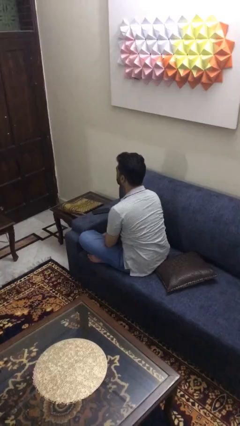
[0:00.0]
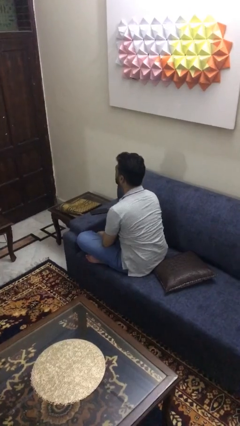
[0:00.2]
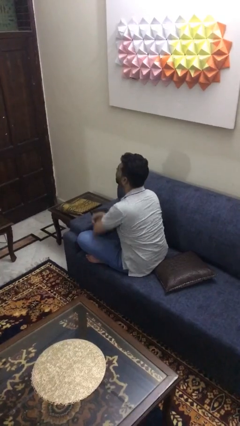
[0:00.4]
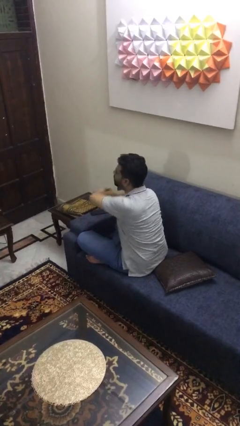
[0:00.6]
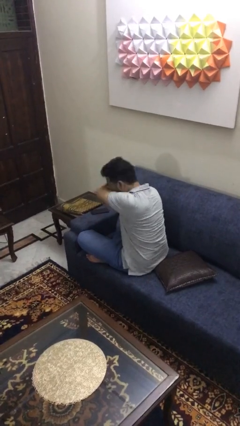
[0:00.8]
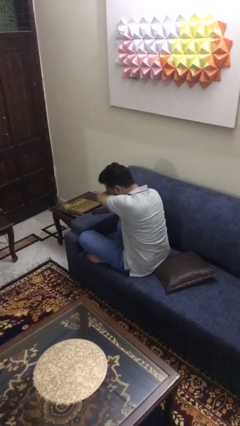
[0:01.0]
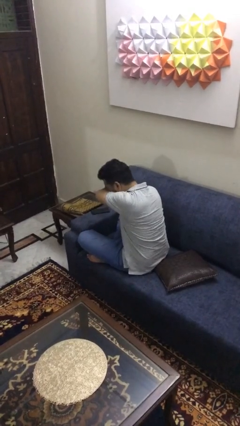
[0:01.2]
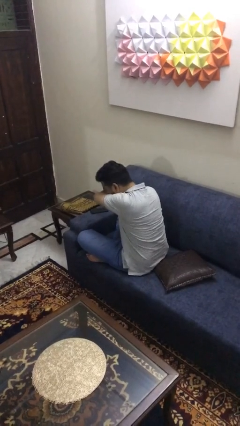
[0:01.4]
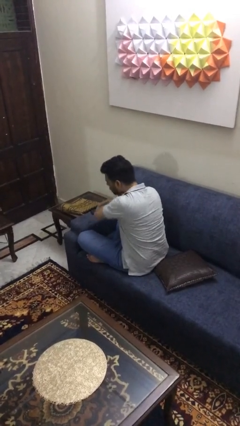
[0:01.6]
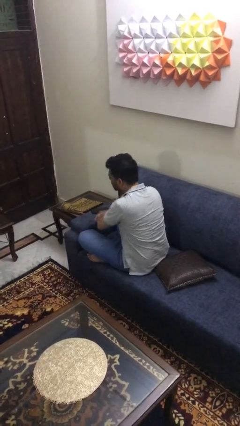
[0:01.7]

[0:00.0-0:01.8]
person sneezes into arm

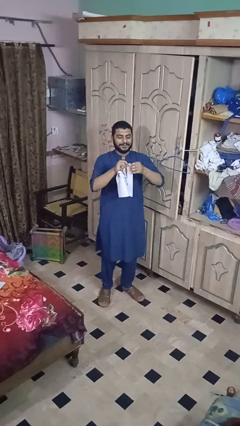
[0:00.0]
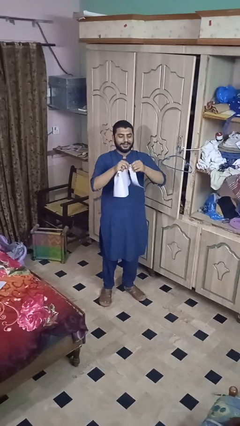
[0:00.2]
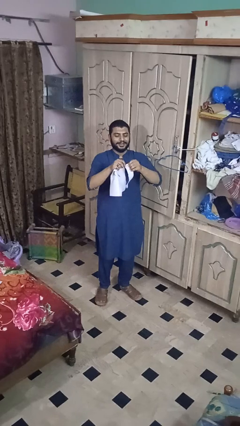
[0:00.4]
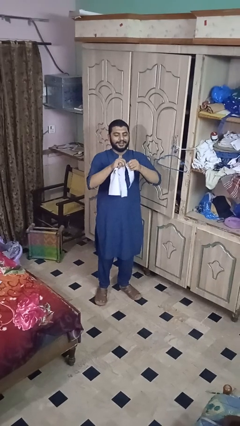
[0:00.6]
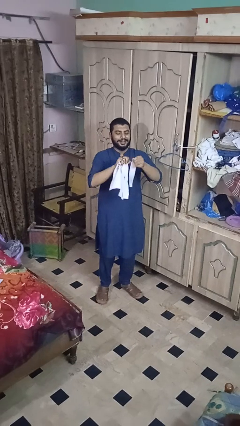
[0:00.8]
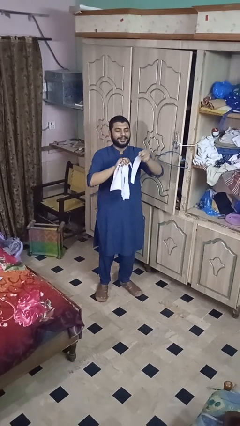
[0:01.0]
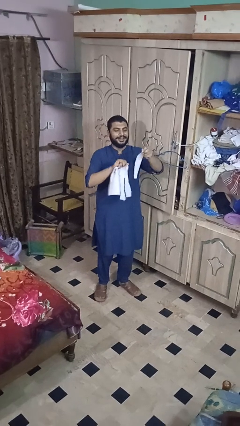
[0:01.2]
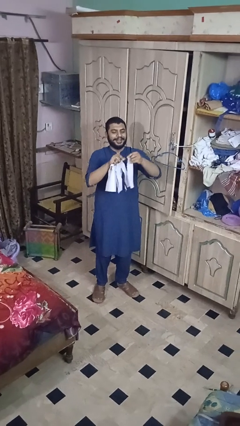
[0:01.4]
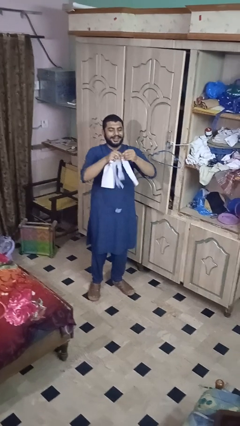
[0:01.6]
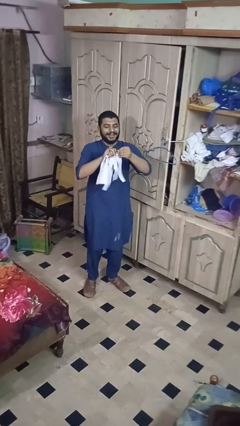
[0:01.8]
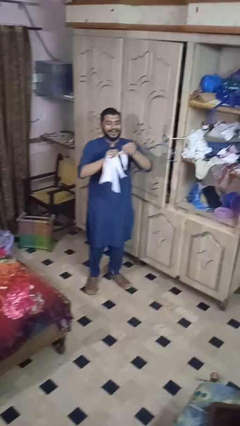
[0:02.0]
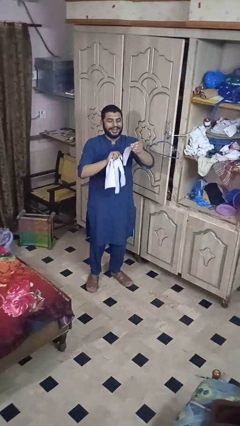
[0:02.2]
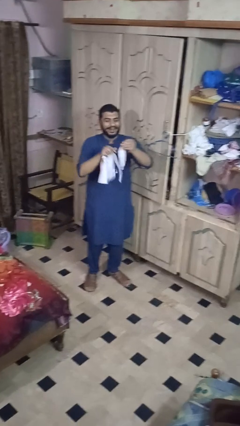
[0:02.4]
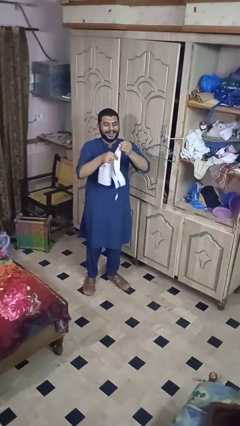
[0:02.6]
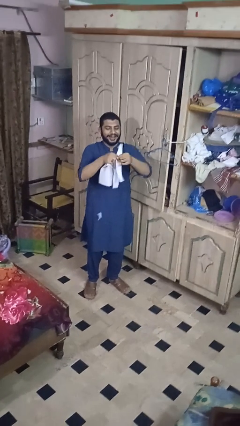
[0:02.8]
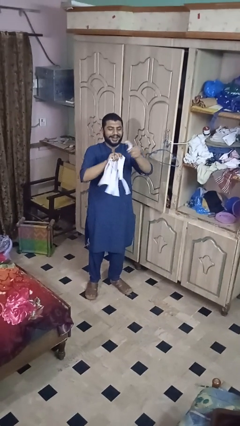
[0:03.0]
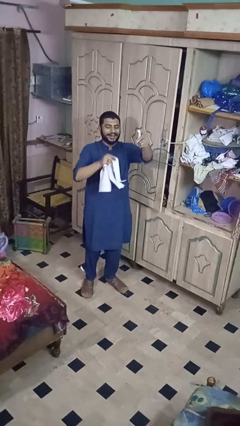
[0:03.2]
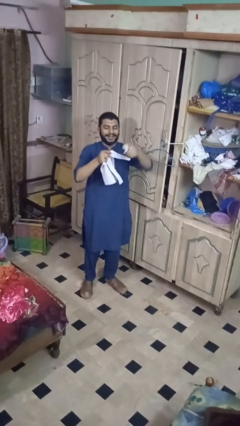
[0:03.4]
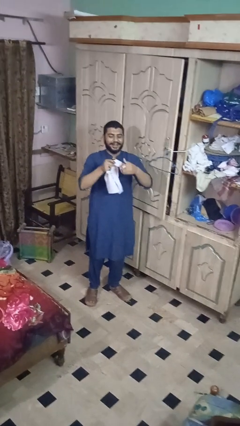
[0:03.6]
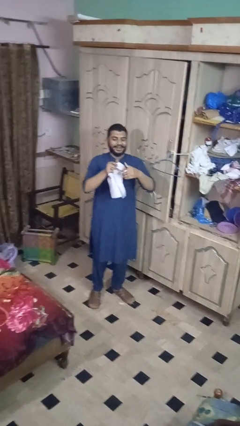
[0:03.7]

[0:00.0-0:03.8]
person tears paper

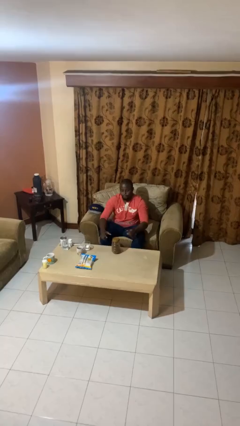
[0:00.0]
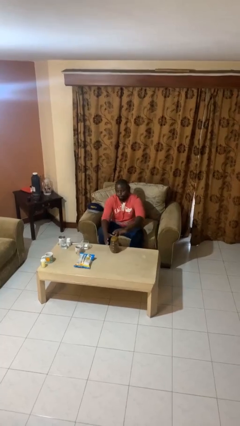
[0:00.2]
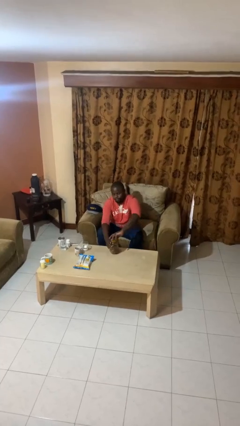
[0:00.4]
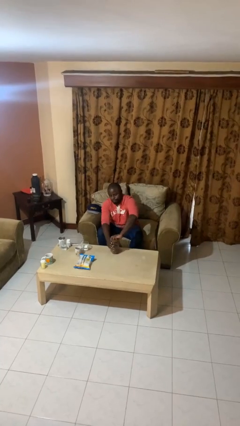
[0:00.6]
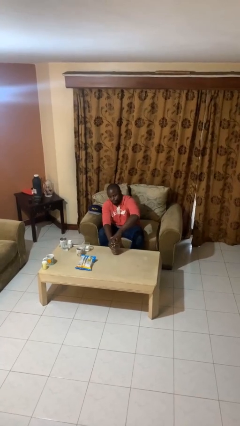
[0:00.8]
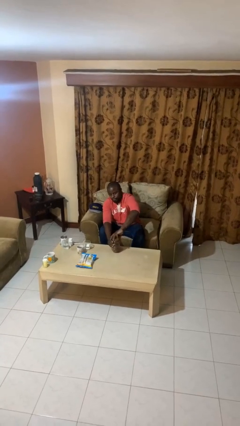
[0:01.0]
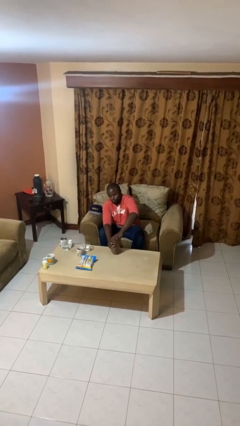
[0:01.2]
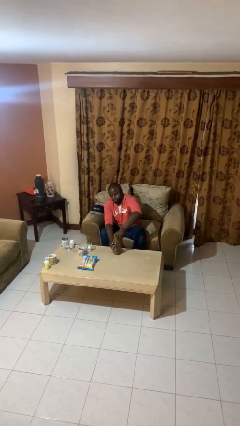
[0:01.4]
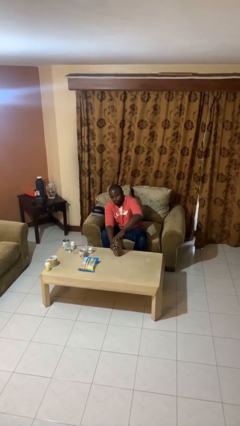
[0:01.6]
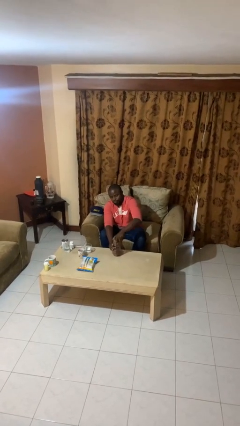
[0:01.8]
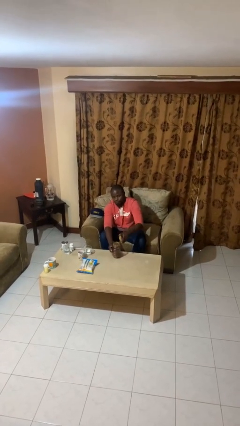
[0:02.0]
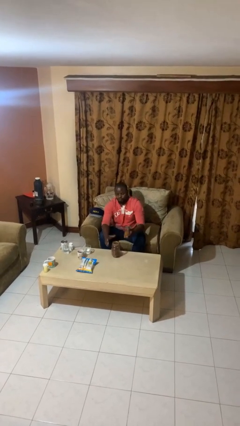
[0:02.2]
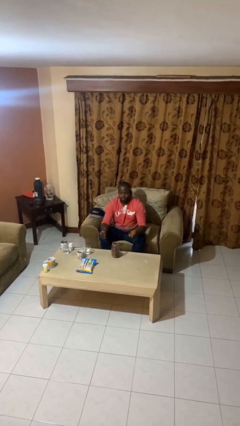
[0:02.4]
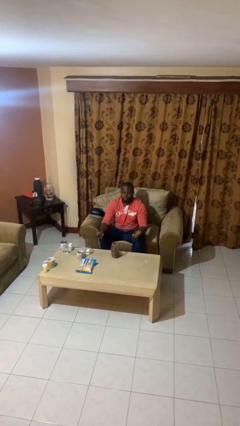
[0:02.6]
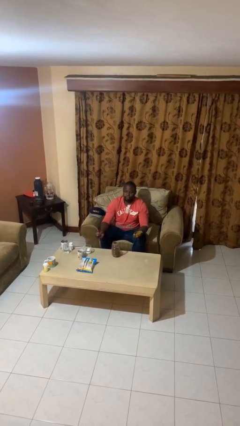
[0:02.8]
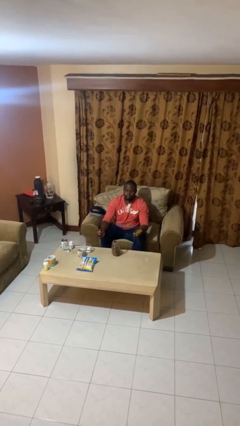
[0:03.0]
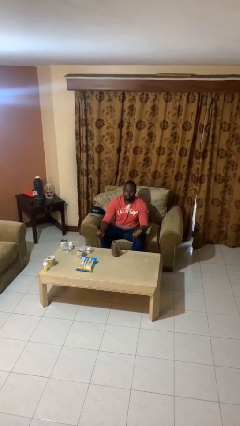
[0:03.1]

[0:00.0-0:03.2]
person opens jar

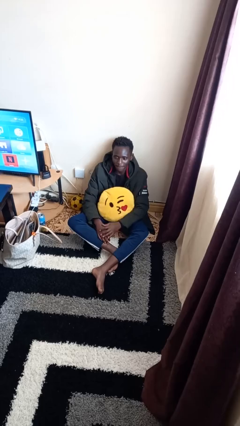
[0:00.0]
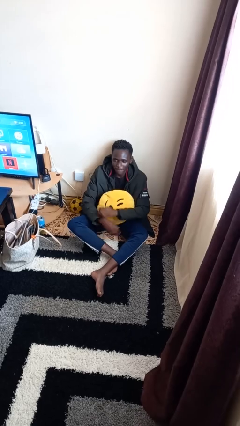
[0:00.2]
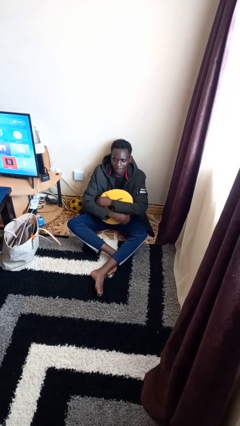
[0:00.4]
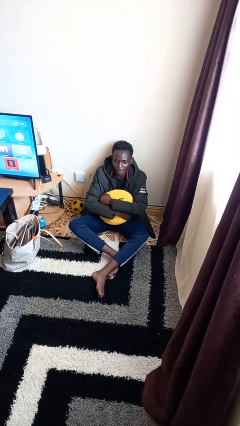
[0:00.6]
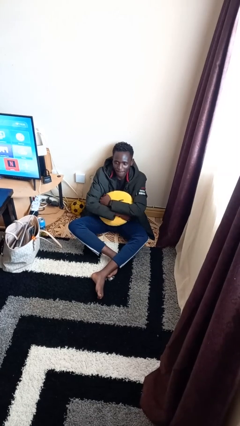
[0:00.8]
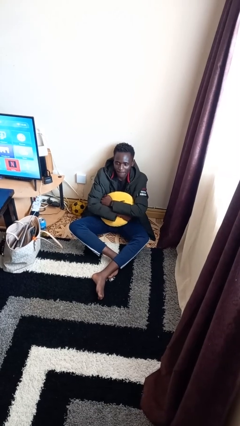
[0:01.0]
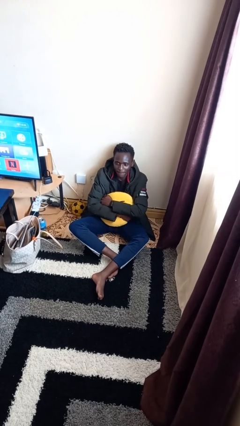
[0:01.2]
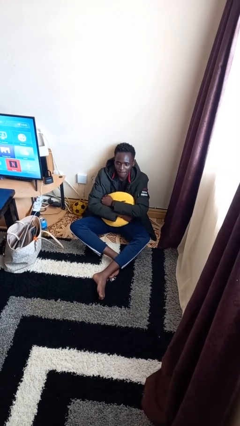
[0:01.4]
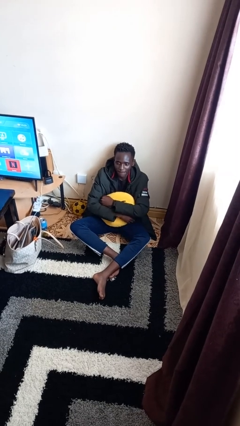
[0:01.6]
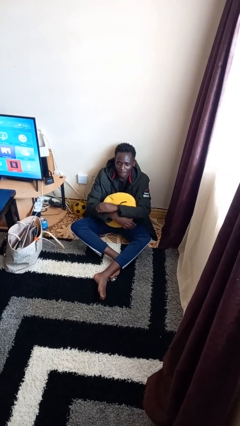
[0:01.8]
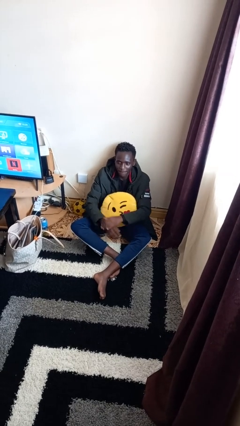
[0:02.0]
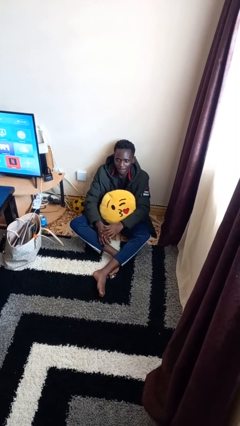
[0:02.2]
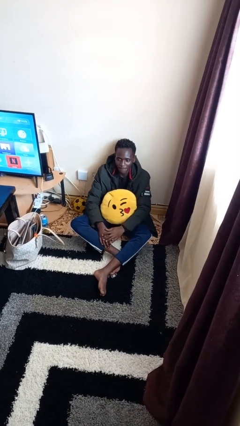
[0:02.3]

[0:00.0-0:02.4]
person hugs stuffed animal

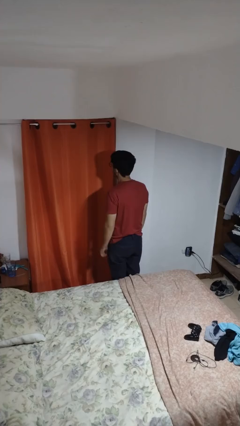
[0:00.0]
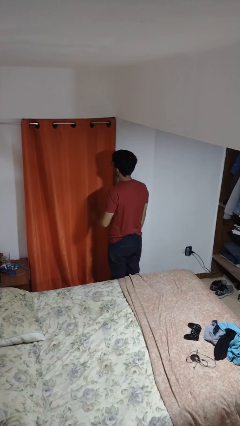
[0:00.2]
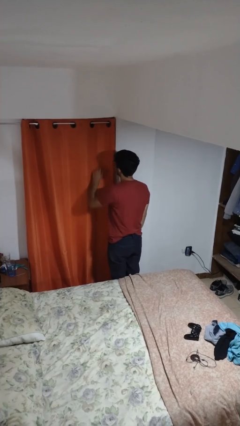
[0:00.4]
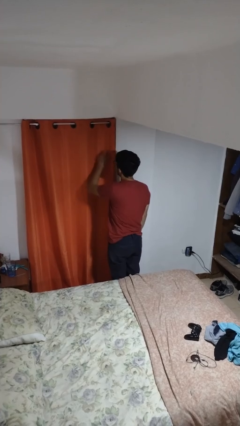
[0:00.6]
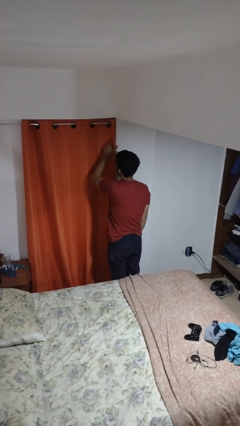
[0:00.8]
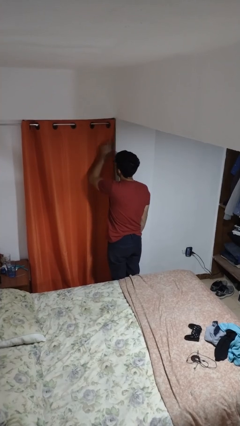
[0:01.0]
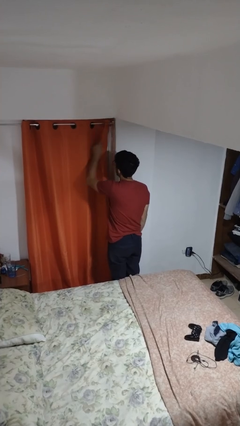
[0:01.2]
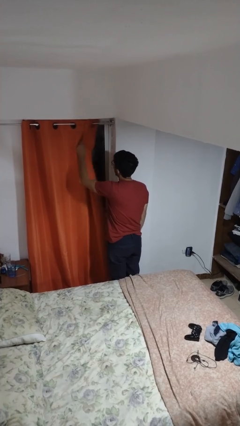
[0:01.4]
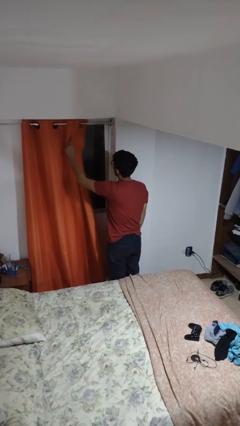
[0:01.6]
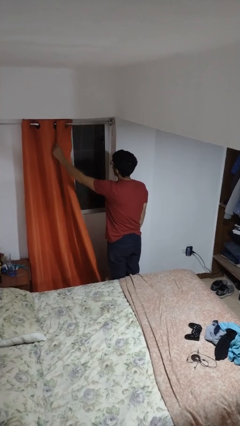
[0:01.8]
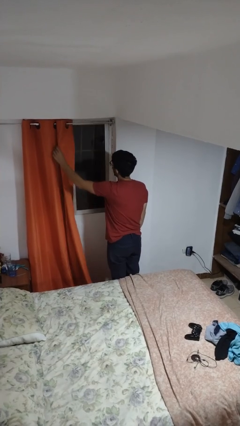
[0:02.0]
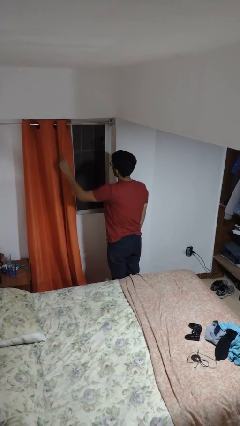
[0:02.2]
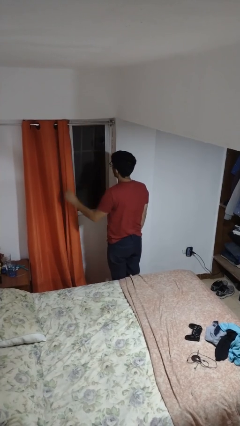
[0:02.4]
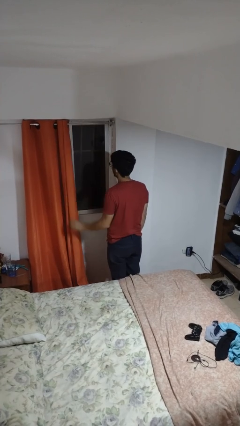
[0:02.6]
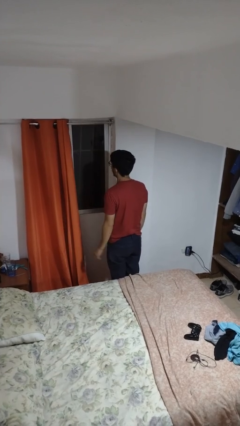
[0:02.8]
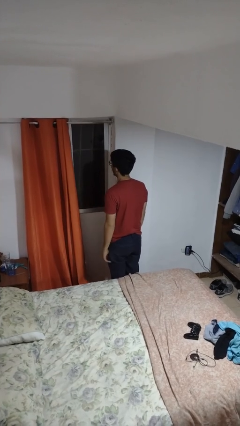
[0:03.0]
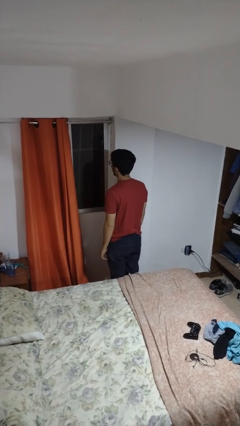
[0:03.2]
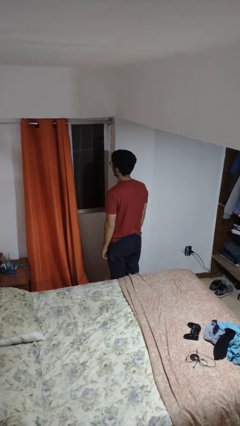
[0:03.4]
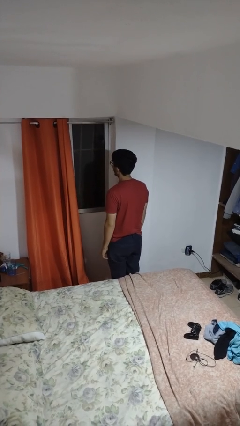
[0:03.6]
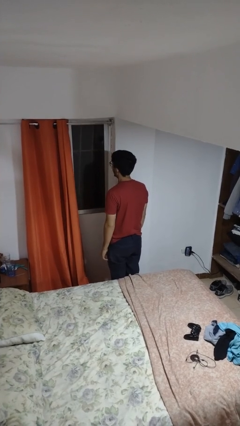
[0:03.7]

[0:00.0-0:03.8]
person opens curtains

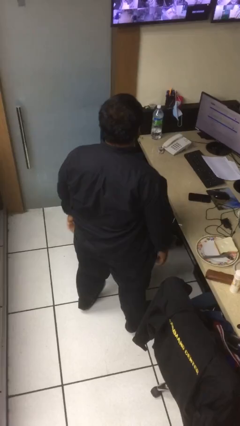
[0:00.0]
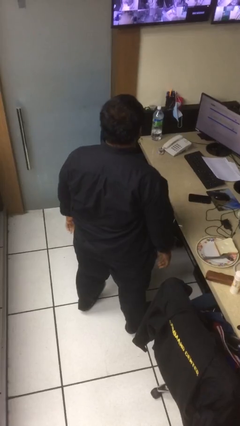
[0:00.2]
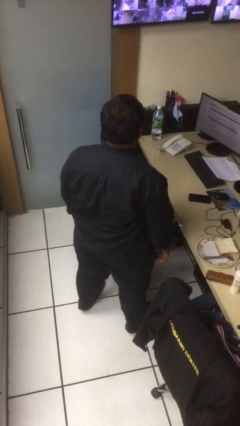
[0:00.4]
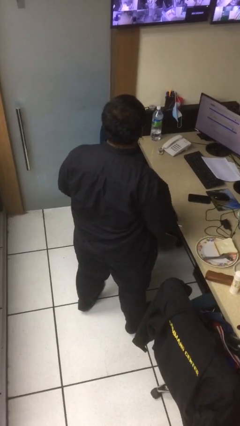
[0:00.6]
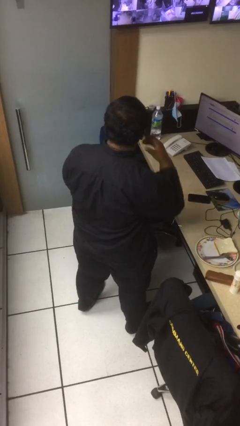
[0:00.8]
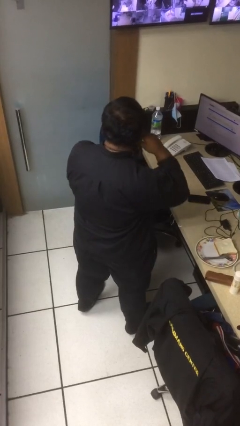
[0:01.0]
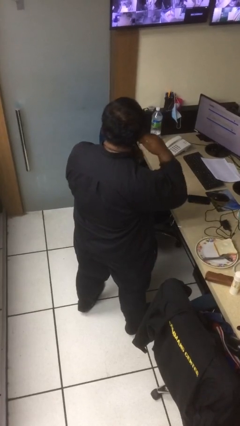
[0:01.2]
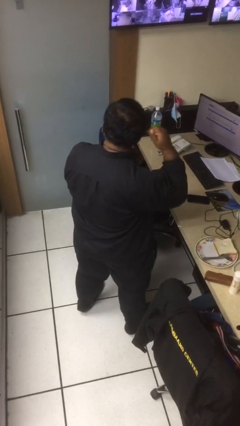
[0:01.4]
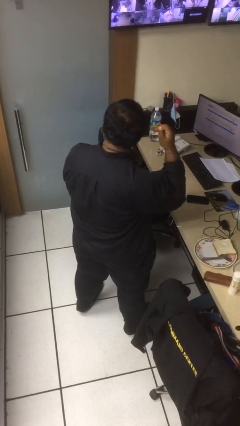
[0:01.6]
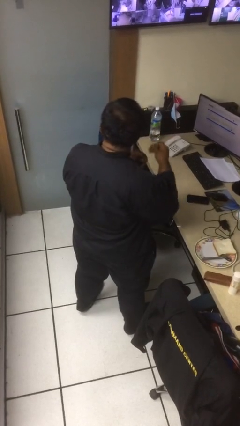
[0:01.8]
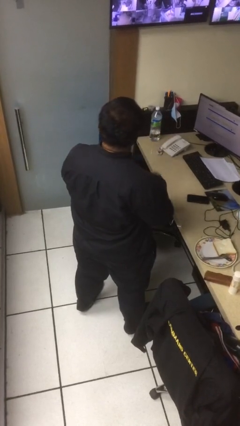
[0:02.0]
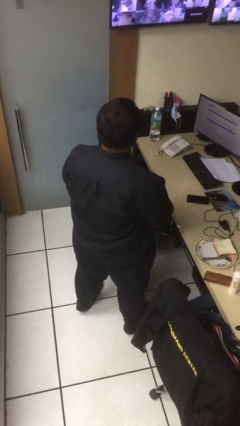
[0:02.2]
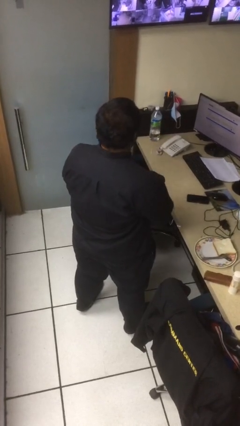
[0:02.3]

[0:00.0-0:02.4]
person takes off earrings

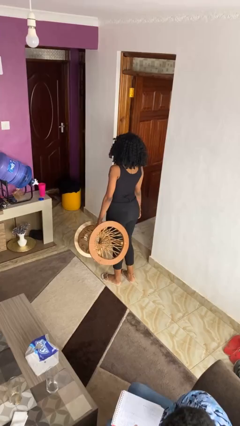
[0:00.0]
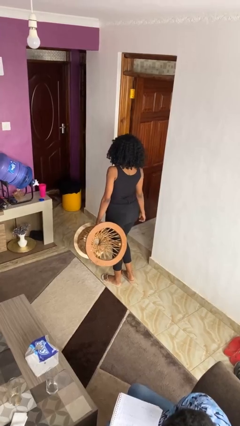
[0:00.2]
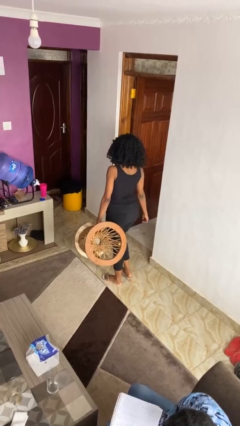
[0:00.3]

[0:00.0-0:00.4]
person carries furniture
